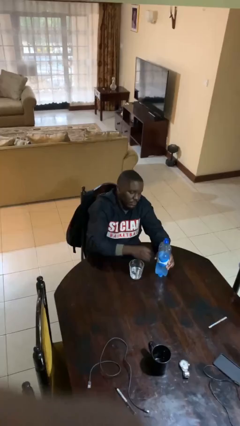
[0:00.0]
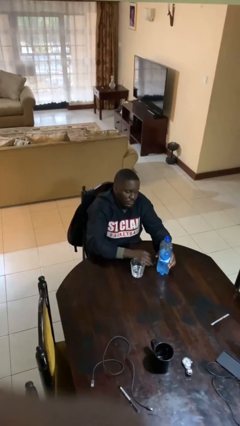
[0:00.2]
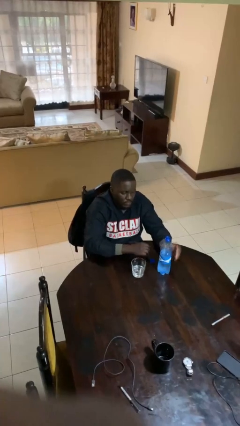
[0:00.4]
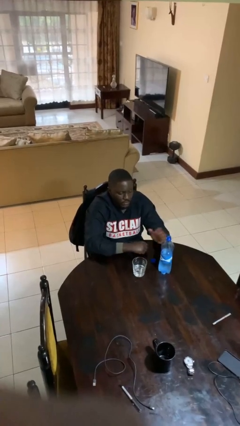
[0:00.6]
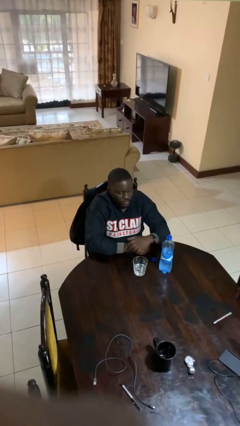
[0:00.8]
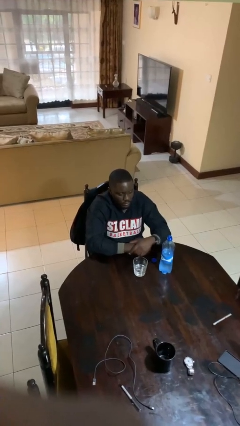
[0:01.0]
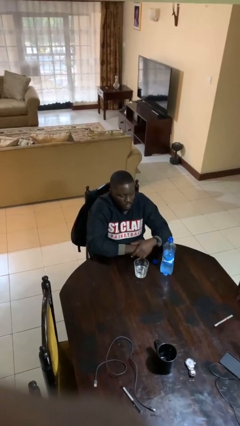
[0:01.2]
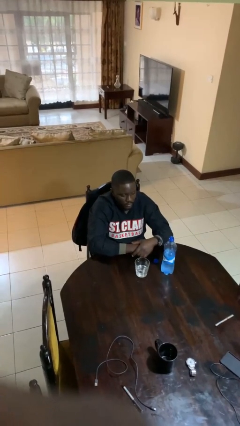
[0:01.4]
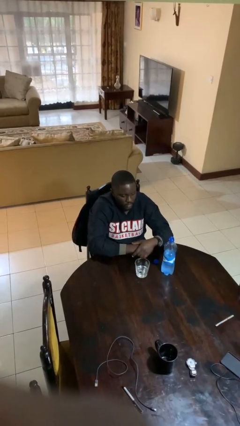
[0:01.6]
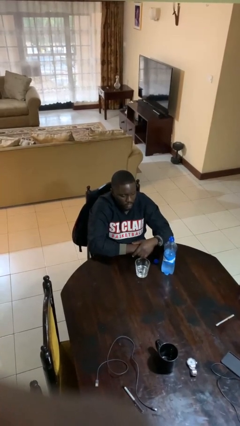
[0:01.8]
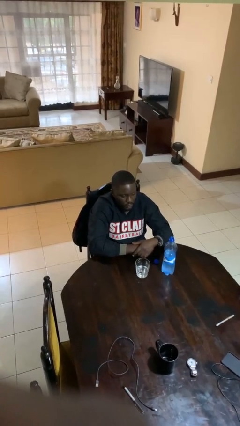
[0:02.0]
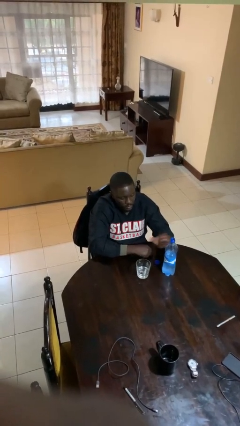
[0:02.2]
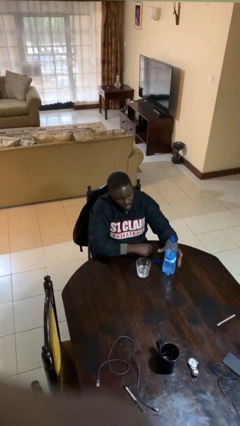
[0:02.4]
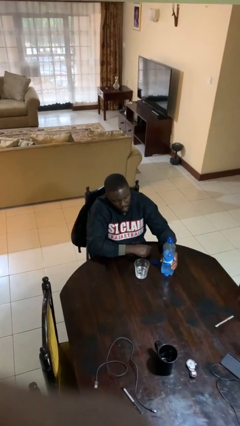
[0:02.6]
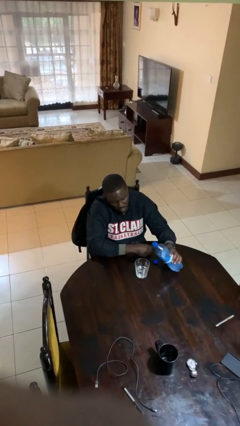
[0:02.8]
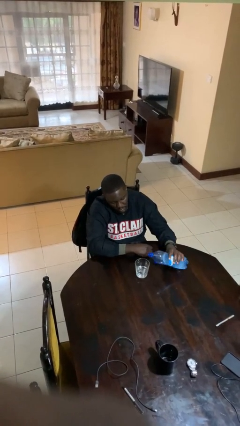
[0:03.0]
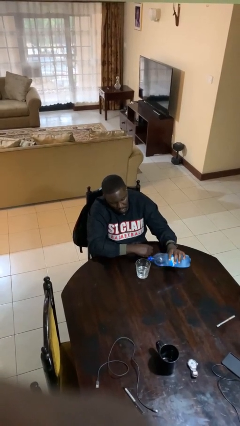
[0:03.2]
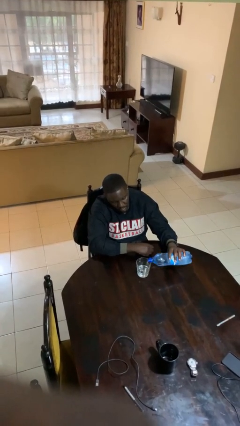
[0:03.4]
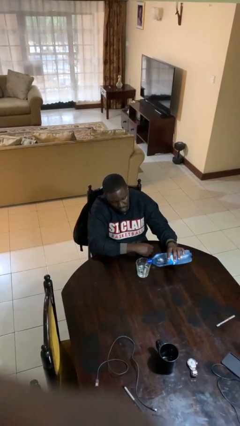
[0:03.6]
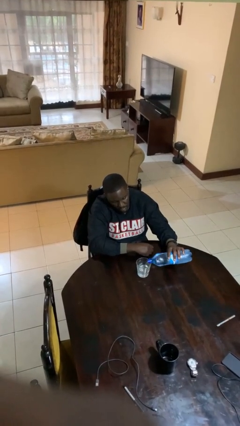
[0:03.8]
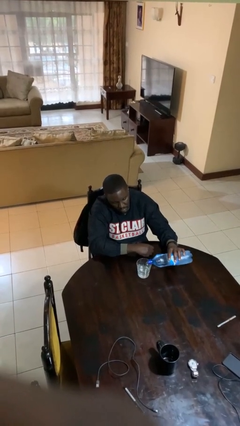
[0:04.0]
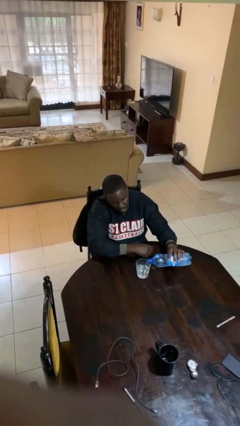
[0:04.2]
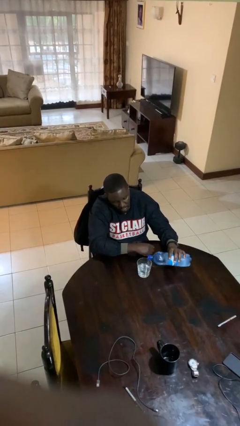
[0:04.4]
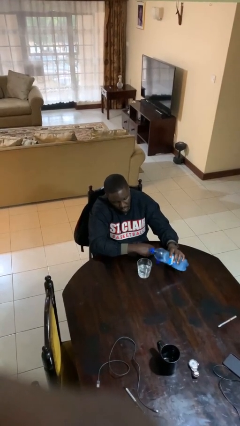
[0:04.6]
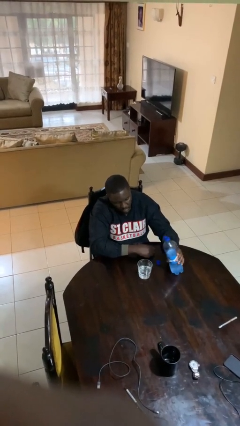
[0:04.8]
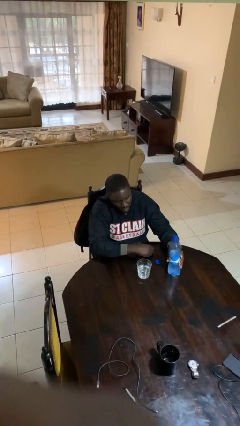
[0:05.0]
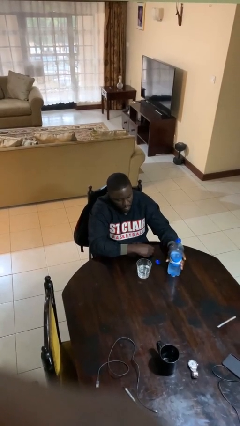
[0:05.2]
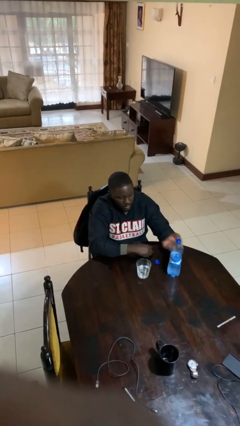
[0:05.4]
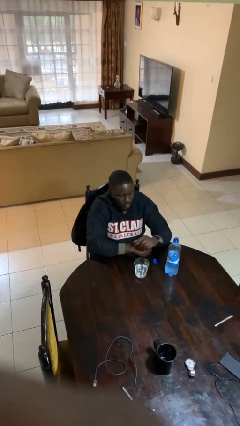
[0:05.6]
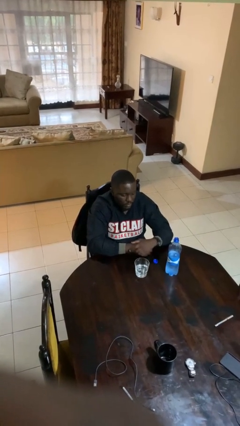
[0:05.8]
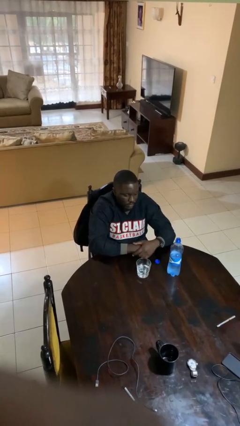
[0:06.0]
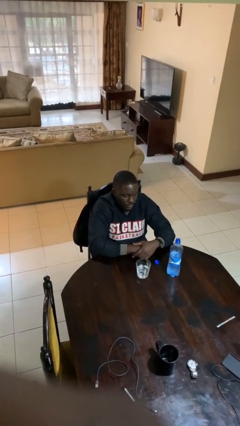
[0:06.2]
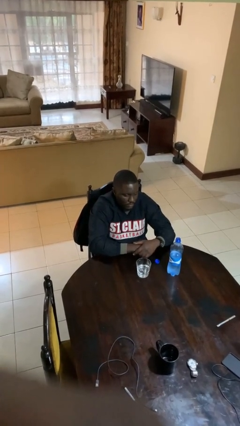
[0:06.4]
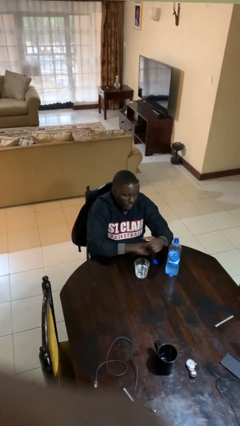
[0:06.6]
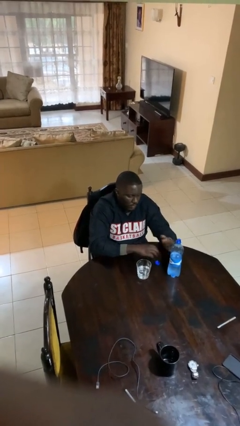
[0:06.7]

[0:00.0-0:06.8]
person pours liquid into cup

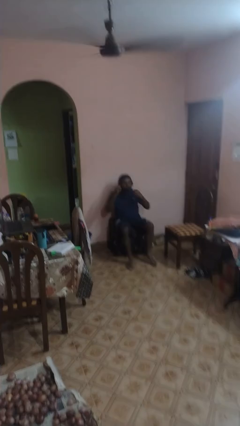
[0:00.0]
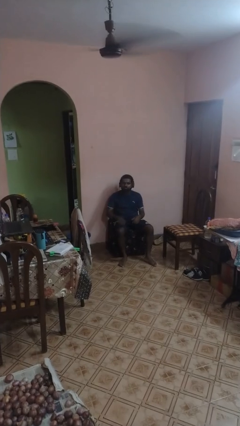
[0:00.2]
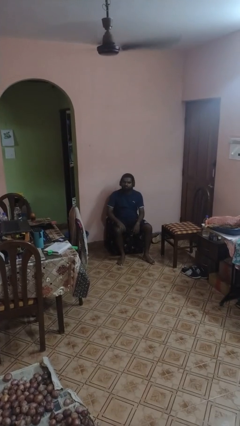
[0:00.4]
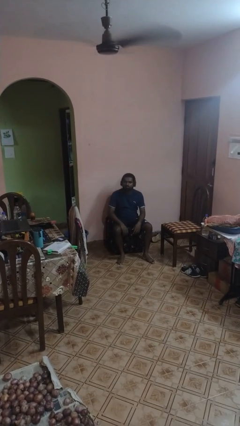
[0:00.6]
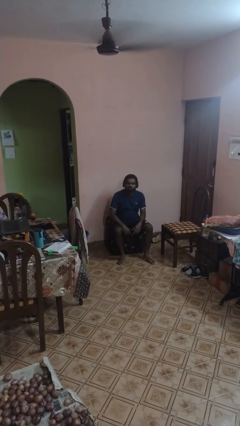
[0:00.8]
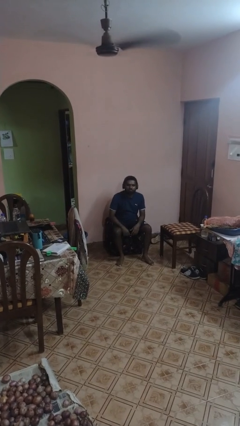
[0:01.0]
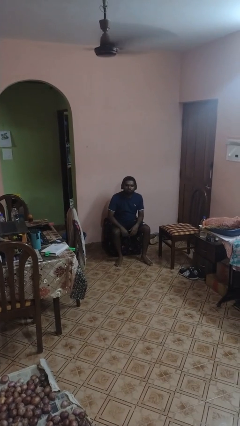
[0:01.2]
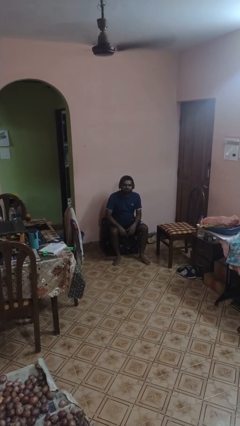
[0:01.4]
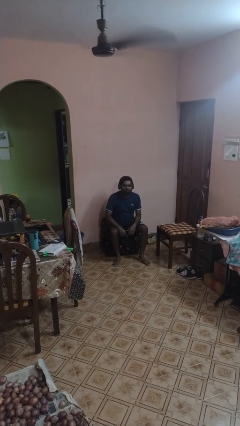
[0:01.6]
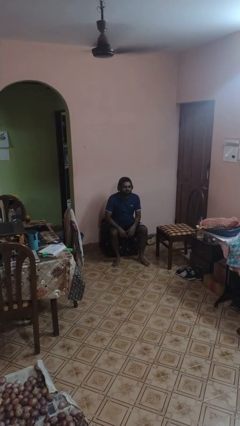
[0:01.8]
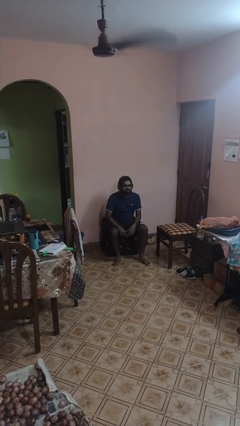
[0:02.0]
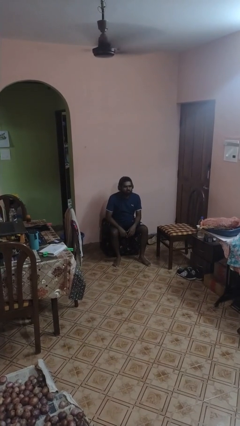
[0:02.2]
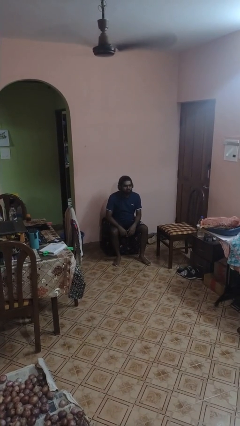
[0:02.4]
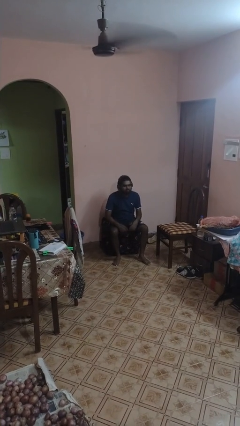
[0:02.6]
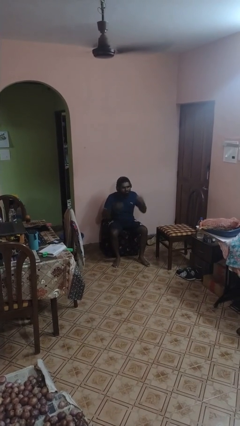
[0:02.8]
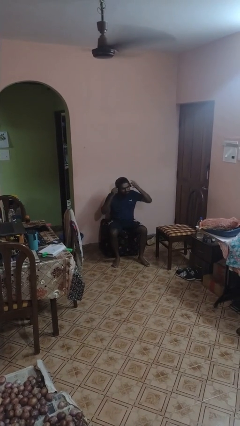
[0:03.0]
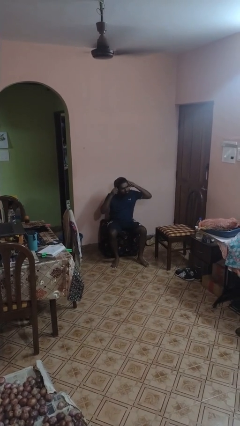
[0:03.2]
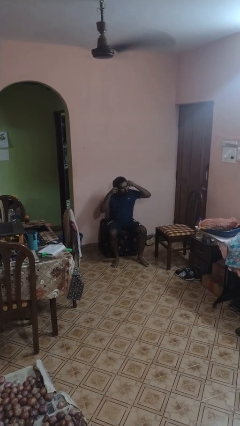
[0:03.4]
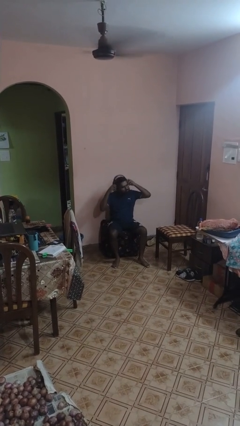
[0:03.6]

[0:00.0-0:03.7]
person puts on headphones

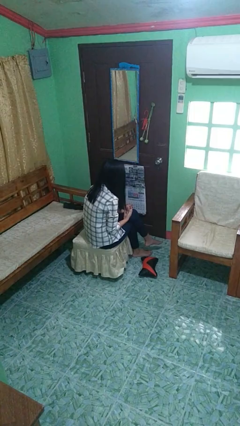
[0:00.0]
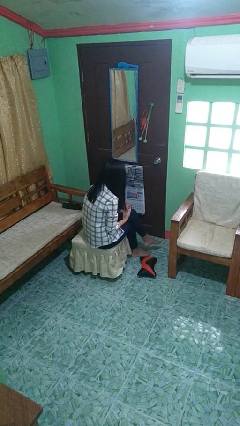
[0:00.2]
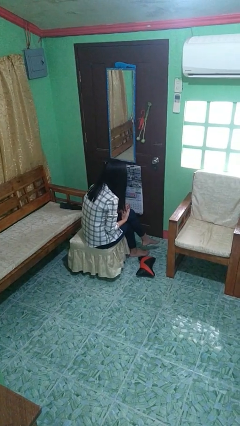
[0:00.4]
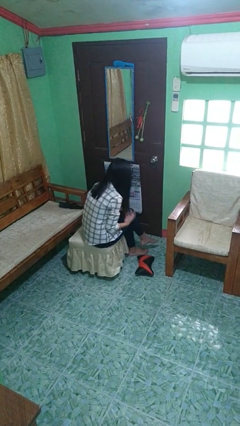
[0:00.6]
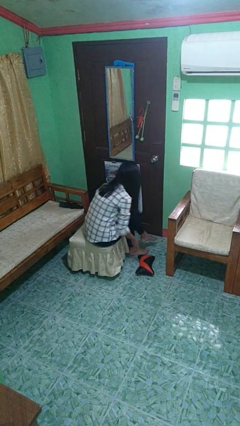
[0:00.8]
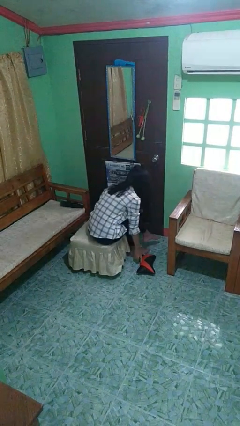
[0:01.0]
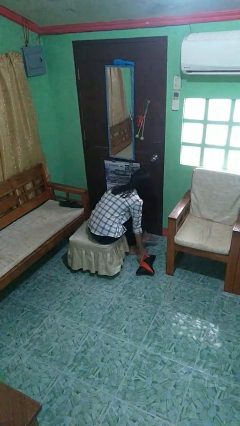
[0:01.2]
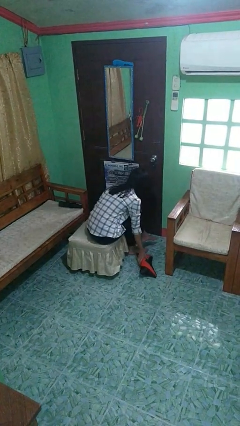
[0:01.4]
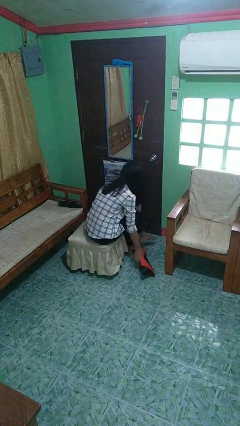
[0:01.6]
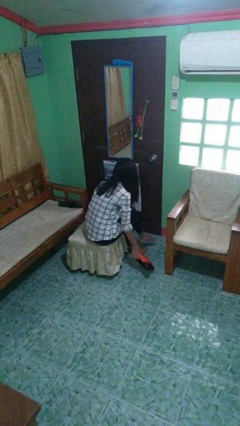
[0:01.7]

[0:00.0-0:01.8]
person picks up object from floor

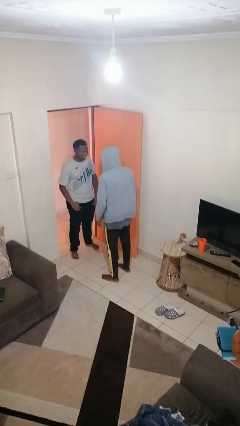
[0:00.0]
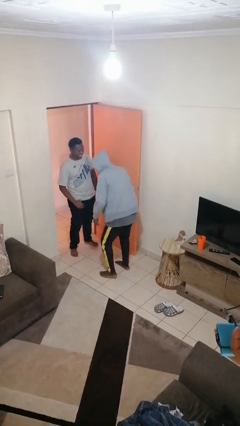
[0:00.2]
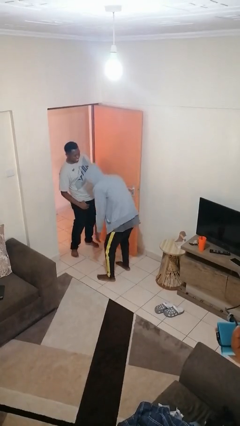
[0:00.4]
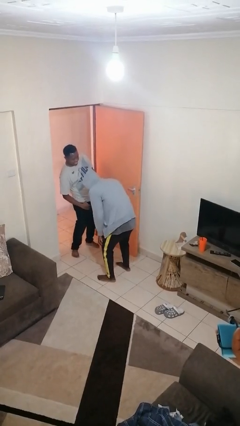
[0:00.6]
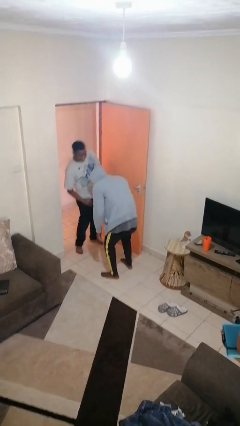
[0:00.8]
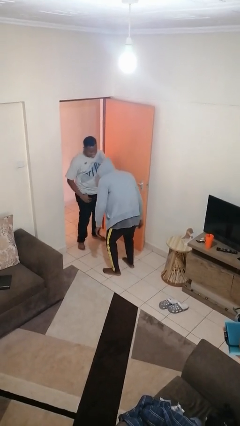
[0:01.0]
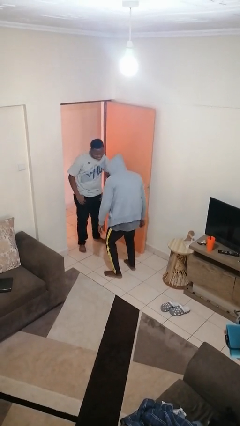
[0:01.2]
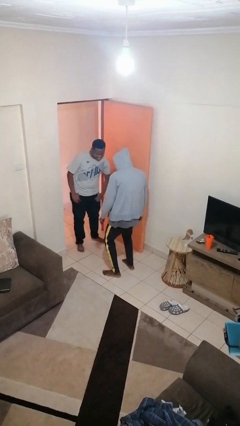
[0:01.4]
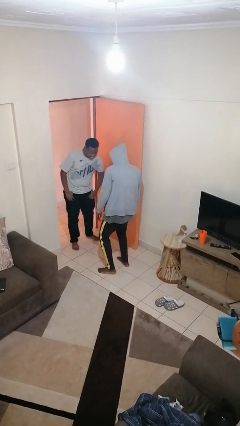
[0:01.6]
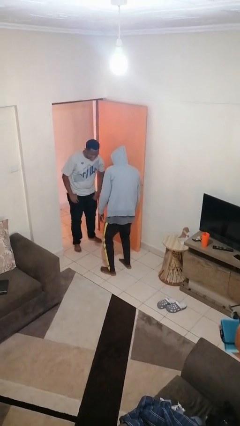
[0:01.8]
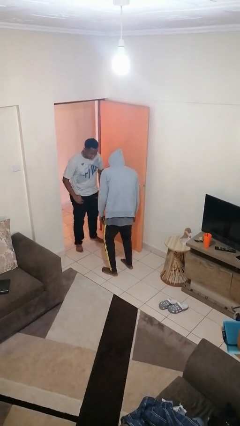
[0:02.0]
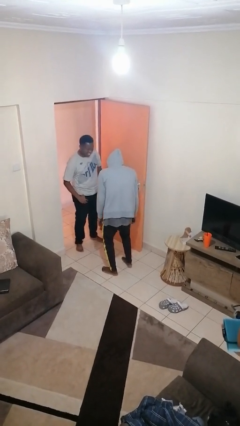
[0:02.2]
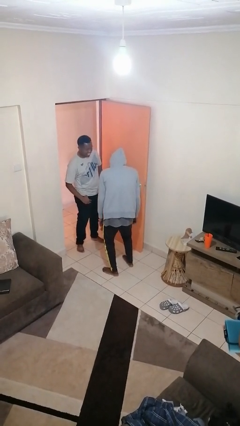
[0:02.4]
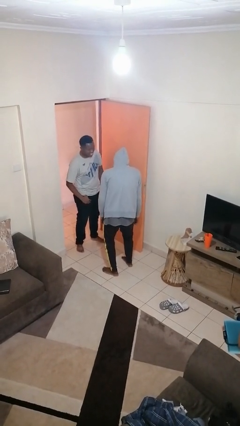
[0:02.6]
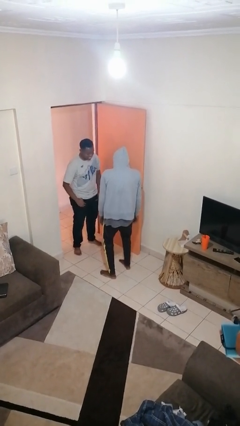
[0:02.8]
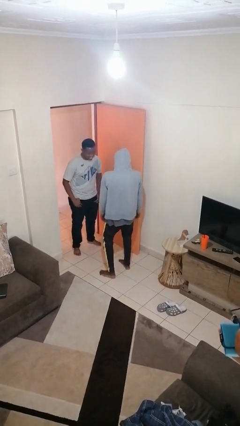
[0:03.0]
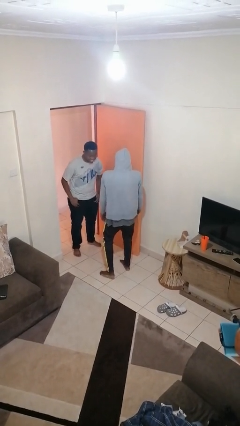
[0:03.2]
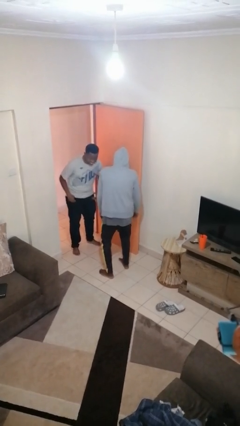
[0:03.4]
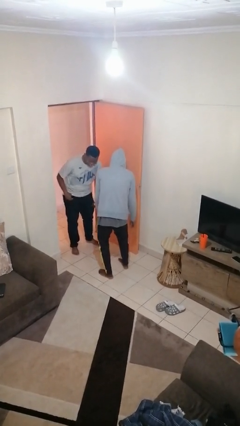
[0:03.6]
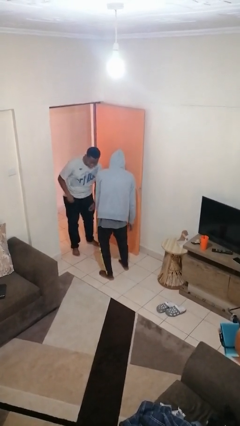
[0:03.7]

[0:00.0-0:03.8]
person laughs with person

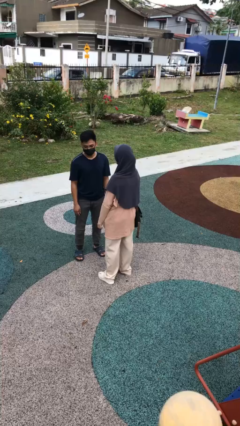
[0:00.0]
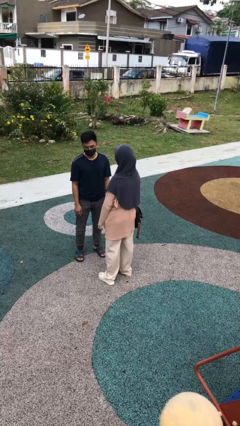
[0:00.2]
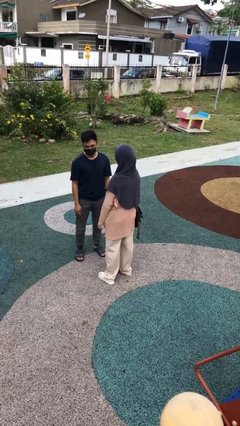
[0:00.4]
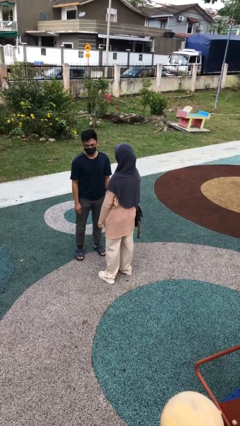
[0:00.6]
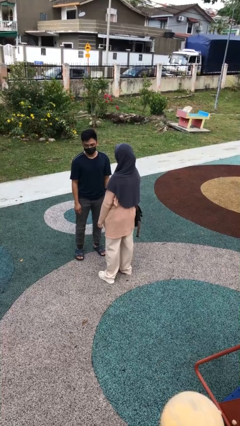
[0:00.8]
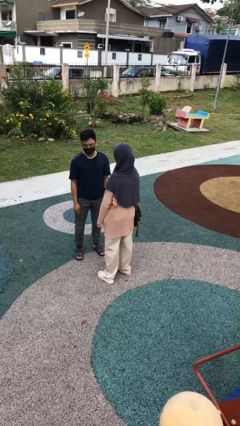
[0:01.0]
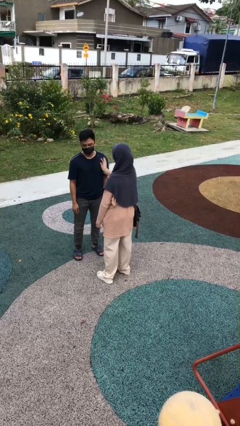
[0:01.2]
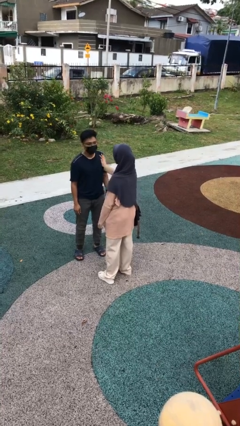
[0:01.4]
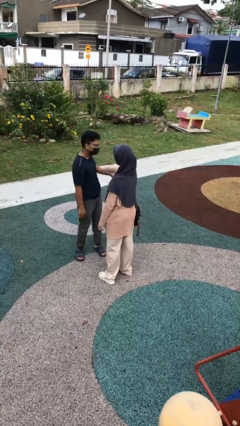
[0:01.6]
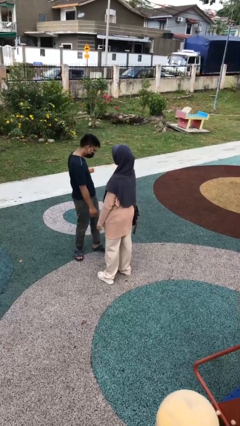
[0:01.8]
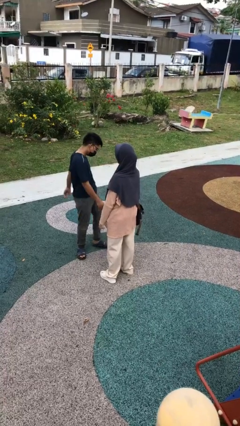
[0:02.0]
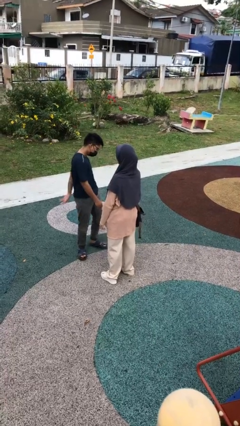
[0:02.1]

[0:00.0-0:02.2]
person shoves person
